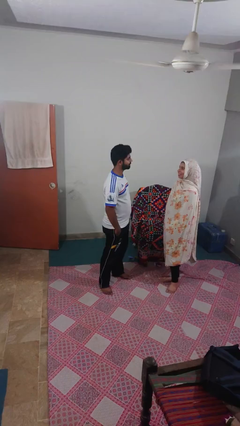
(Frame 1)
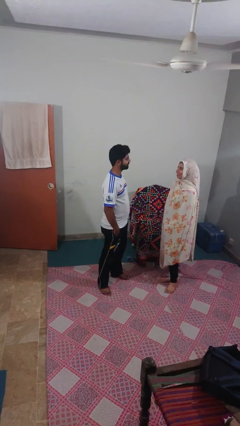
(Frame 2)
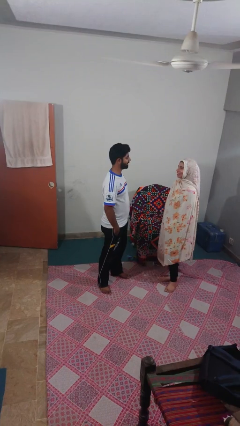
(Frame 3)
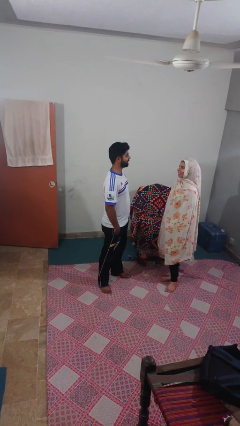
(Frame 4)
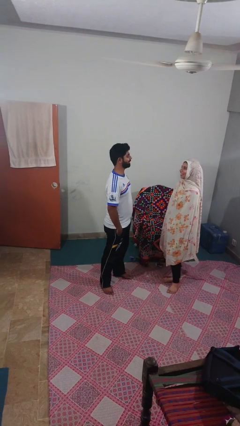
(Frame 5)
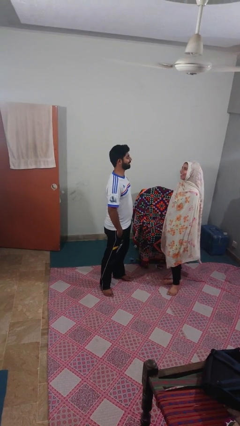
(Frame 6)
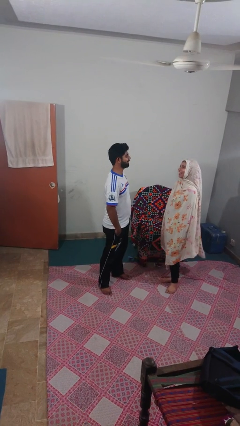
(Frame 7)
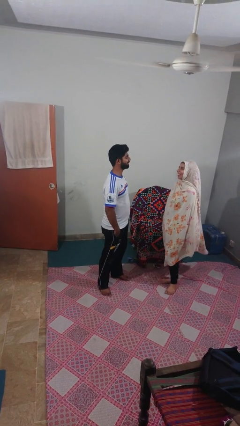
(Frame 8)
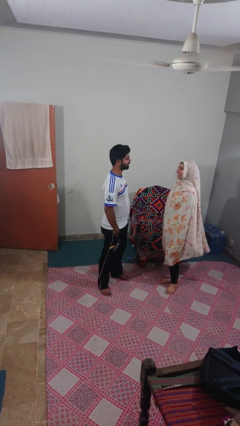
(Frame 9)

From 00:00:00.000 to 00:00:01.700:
person laughs with person

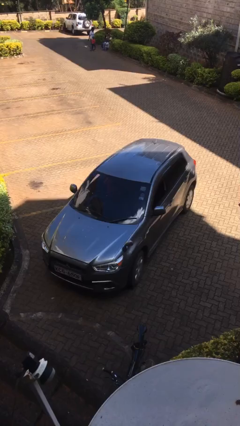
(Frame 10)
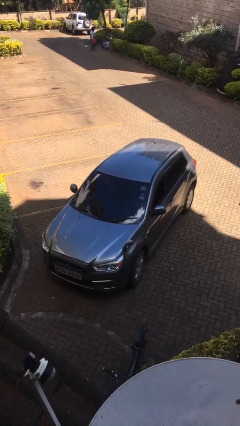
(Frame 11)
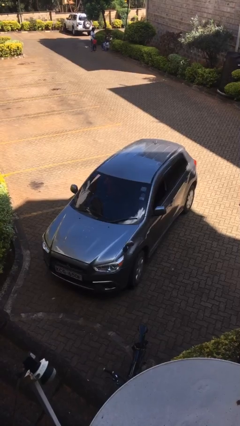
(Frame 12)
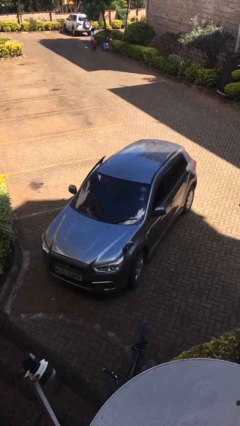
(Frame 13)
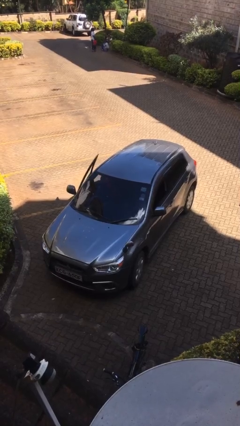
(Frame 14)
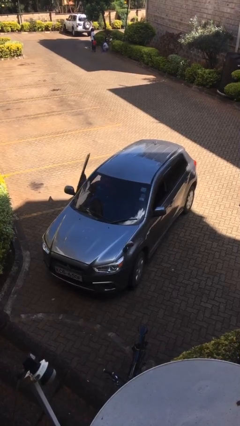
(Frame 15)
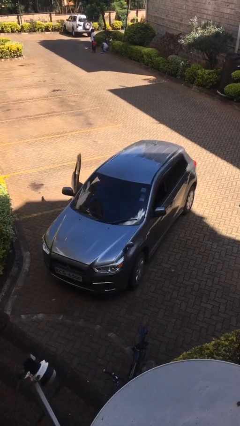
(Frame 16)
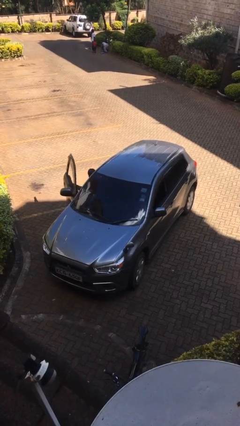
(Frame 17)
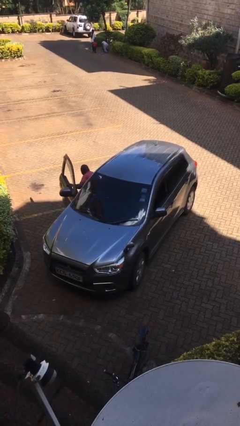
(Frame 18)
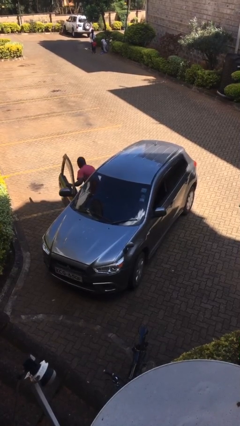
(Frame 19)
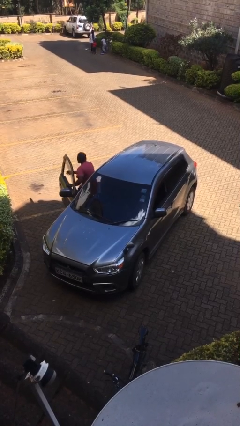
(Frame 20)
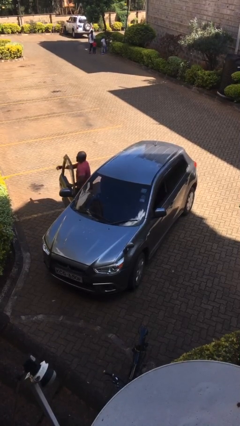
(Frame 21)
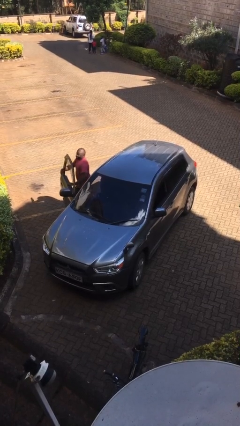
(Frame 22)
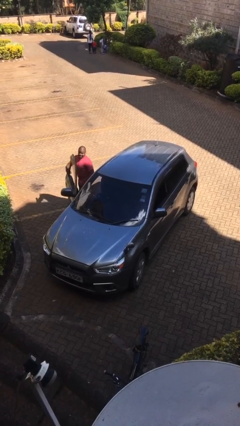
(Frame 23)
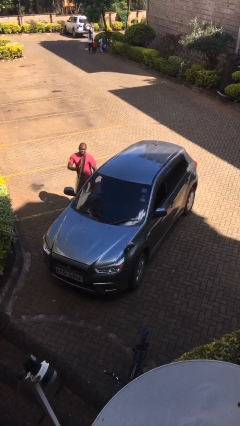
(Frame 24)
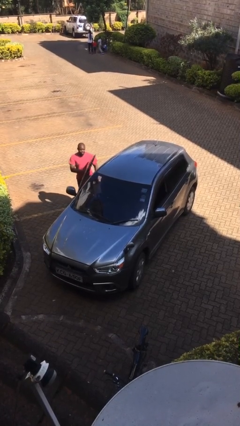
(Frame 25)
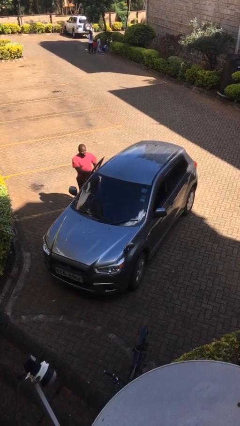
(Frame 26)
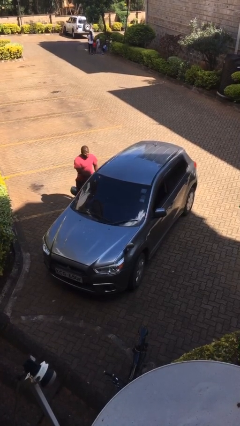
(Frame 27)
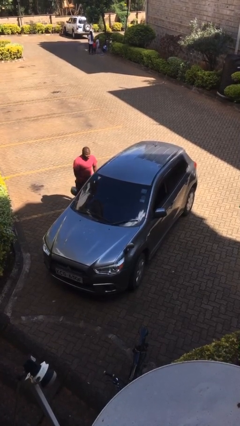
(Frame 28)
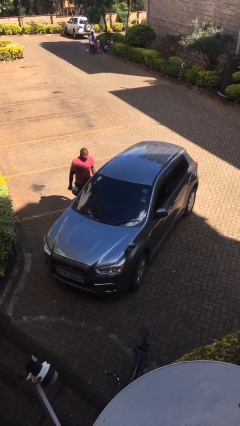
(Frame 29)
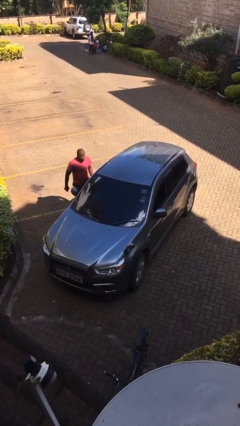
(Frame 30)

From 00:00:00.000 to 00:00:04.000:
car drops off person

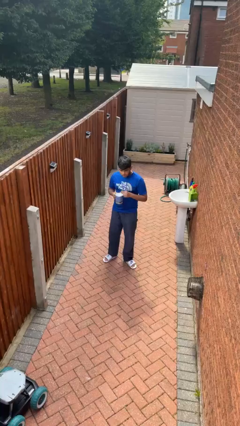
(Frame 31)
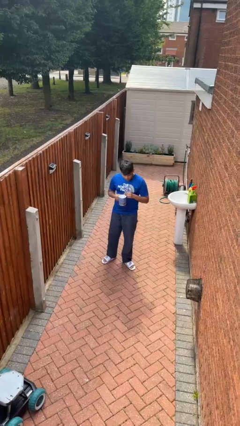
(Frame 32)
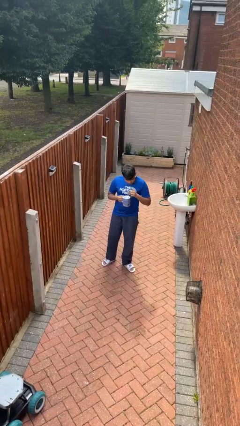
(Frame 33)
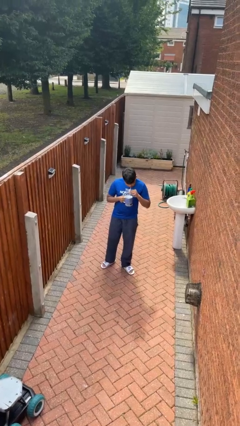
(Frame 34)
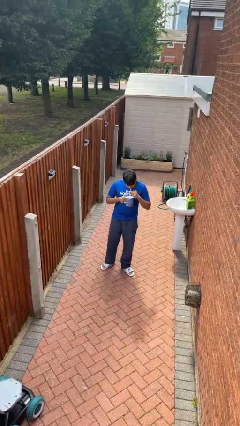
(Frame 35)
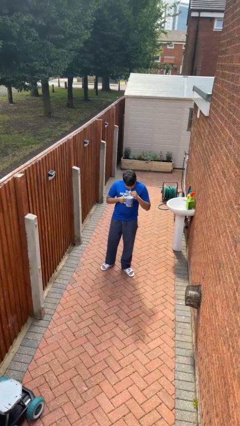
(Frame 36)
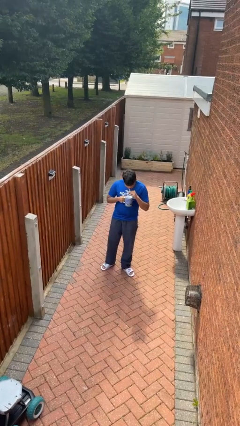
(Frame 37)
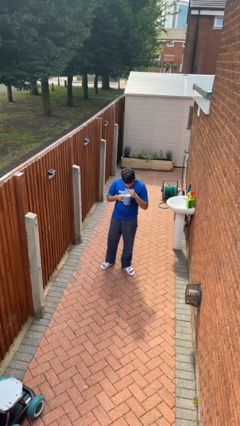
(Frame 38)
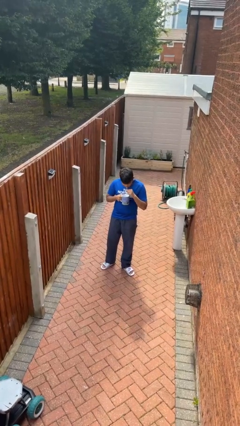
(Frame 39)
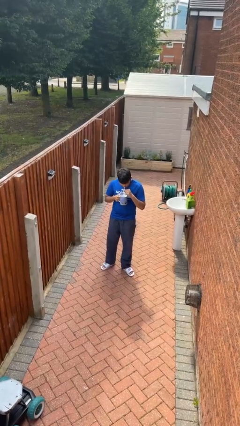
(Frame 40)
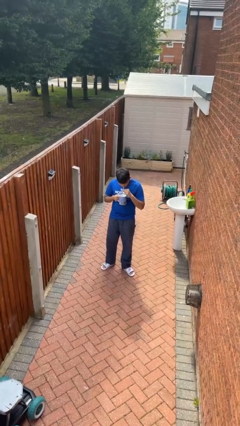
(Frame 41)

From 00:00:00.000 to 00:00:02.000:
person drinks from straw

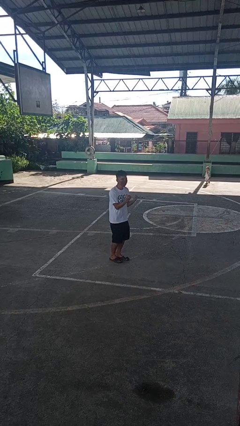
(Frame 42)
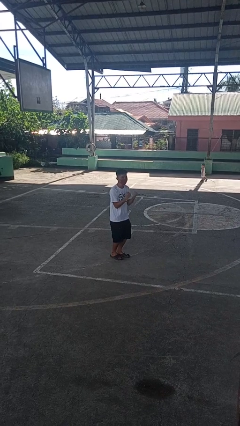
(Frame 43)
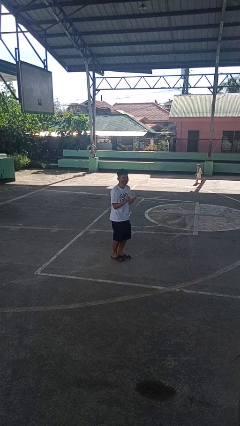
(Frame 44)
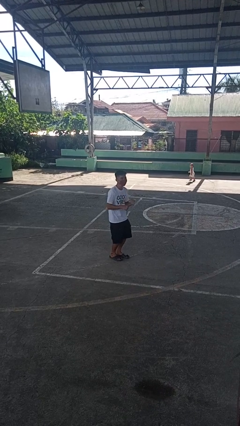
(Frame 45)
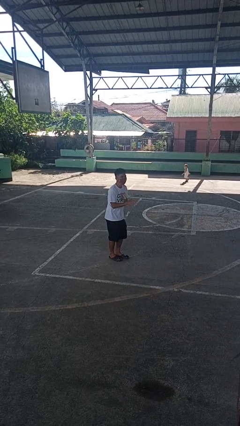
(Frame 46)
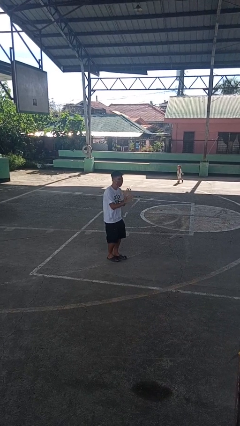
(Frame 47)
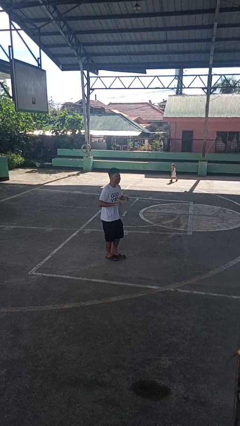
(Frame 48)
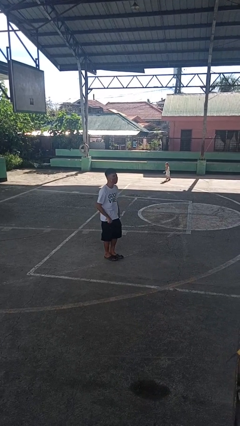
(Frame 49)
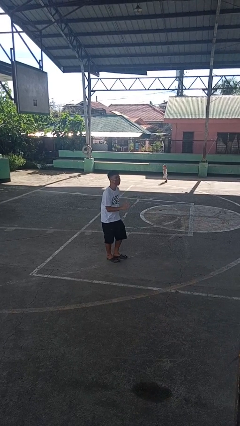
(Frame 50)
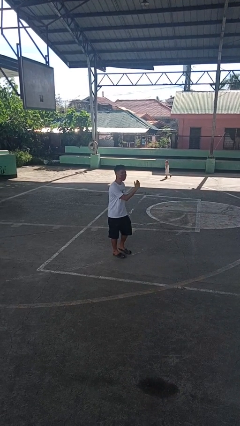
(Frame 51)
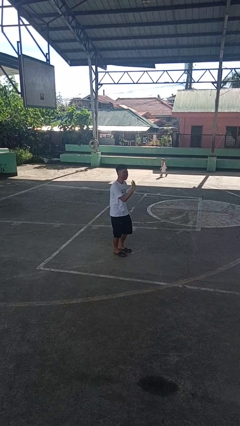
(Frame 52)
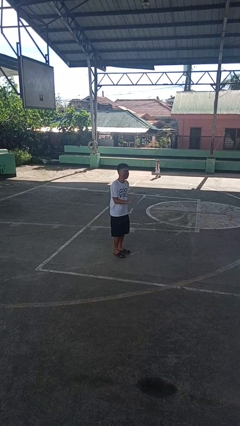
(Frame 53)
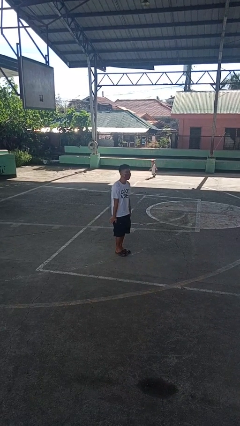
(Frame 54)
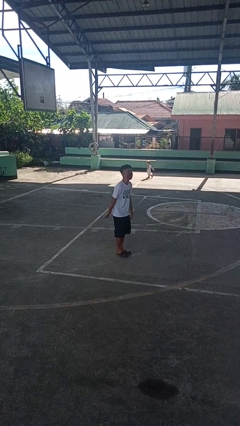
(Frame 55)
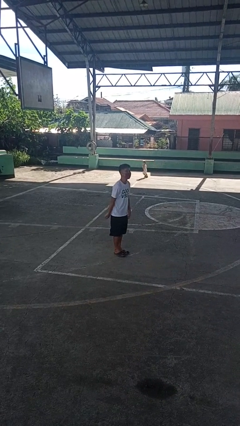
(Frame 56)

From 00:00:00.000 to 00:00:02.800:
person dances in place

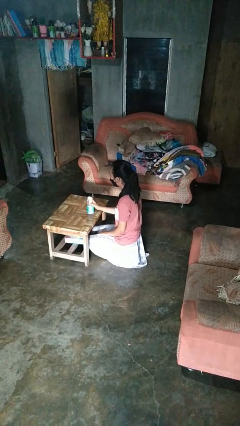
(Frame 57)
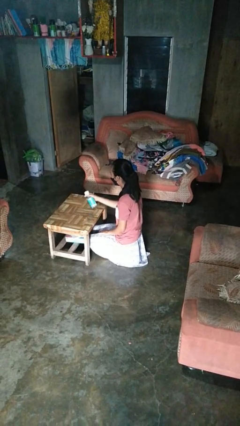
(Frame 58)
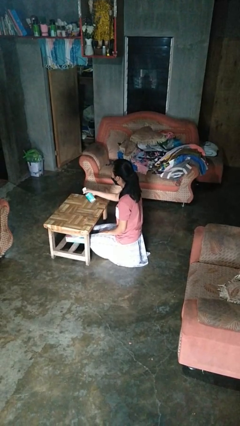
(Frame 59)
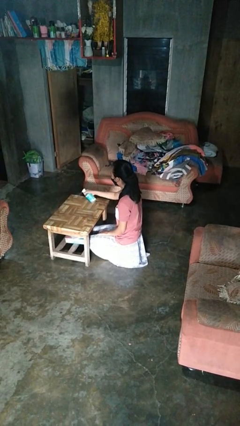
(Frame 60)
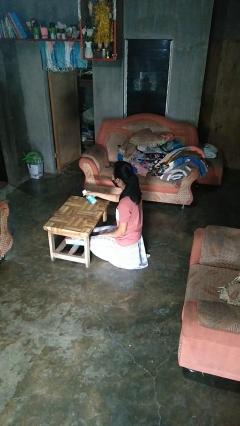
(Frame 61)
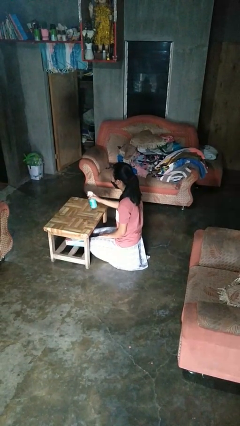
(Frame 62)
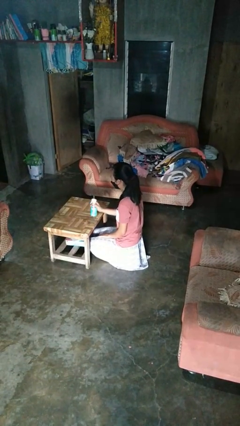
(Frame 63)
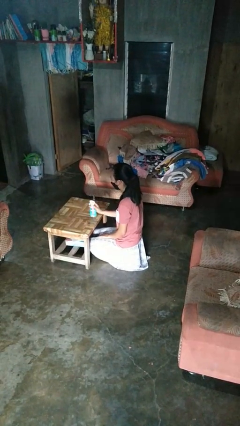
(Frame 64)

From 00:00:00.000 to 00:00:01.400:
person sprays from bottle

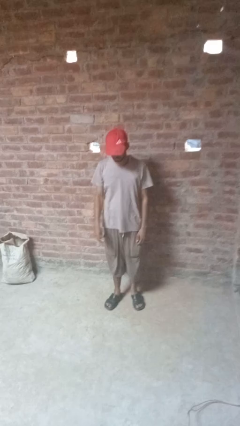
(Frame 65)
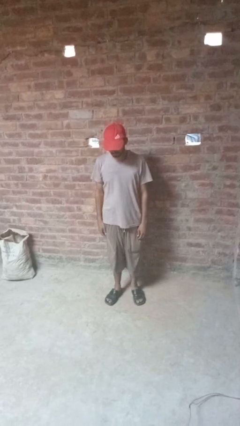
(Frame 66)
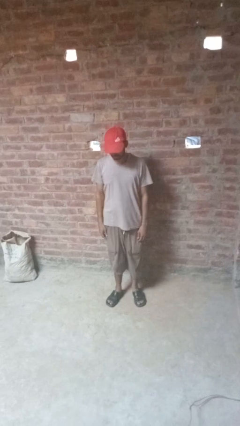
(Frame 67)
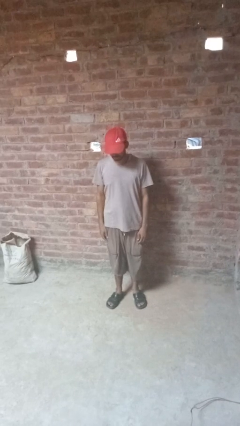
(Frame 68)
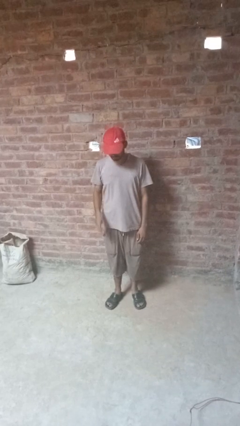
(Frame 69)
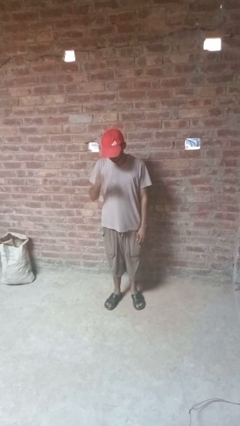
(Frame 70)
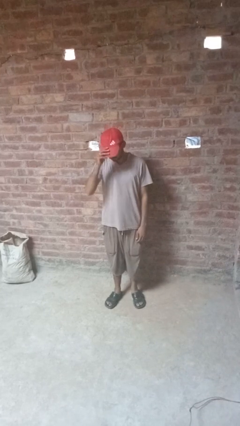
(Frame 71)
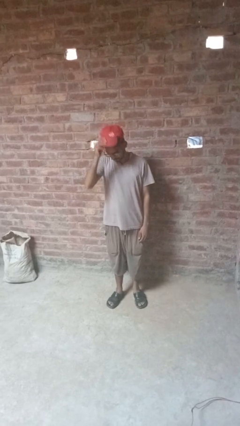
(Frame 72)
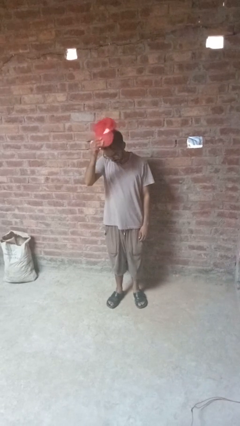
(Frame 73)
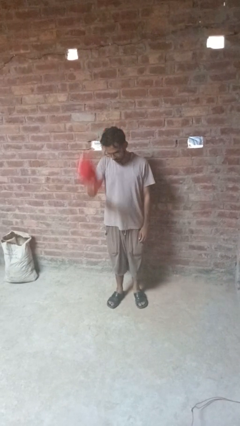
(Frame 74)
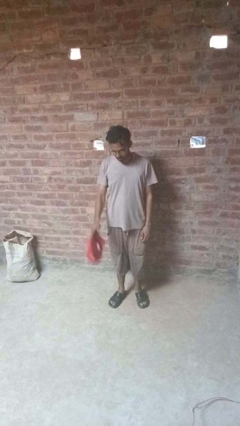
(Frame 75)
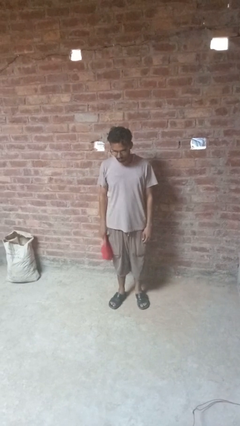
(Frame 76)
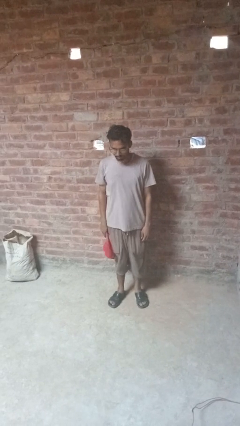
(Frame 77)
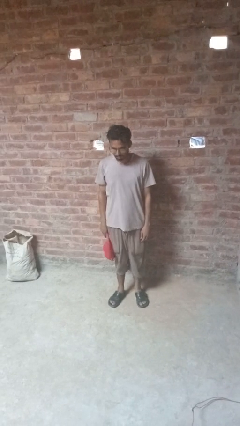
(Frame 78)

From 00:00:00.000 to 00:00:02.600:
person takes off hat

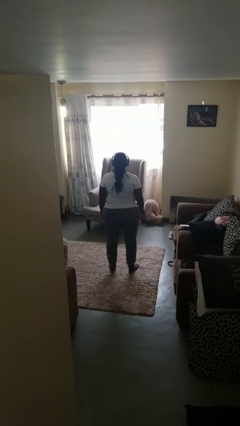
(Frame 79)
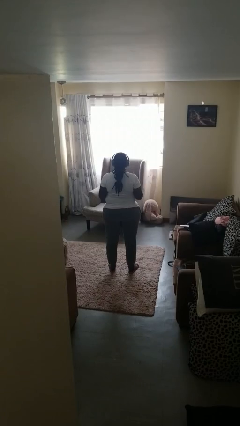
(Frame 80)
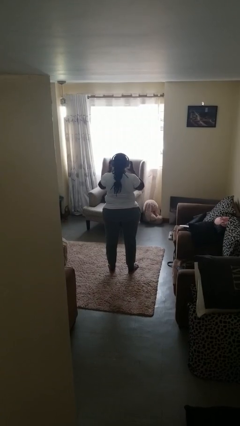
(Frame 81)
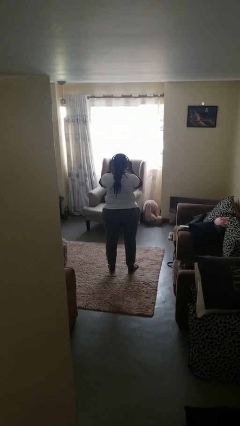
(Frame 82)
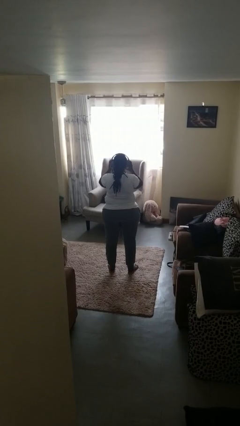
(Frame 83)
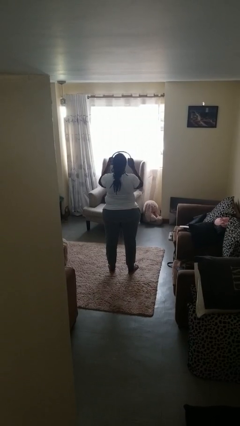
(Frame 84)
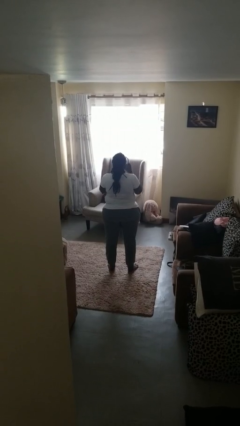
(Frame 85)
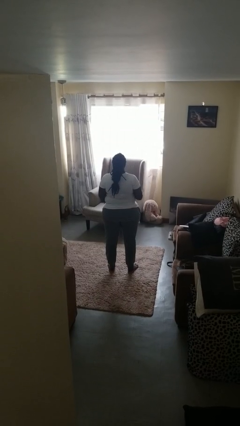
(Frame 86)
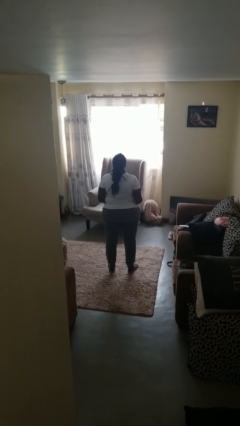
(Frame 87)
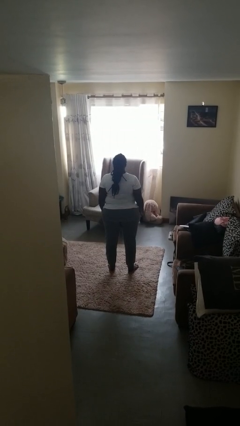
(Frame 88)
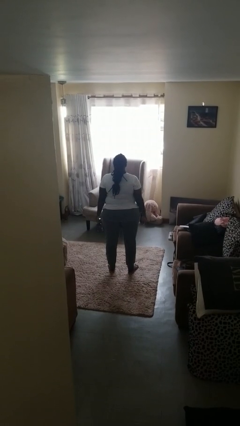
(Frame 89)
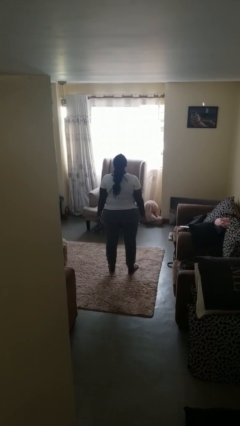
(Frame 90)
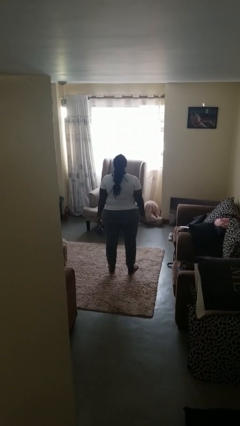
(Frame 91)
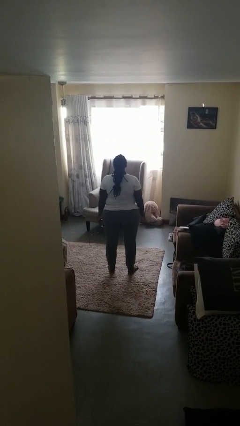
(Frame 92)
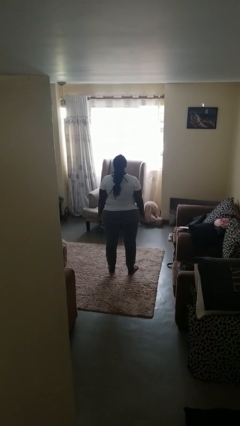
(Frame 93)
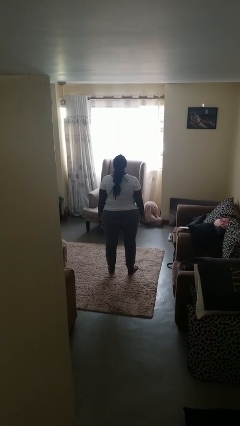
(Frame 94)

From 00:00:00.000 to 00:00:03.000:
person takes off headphones
